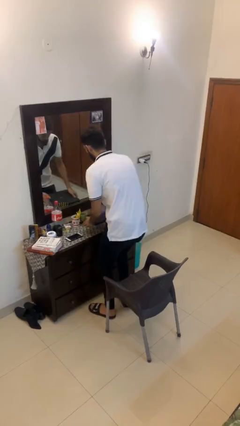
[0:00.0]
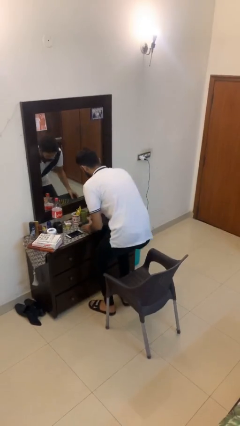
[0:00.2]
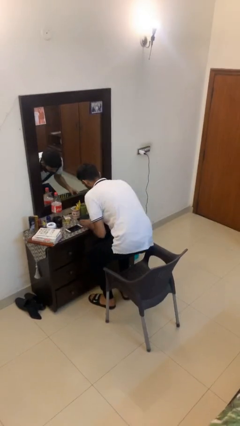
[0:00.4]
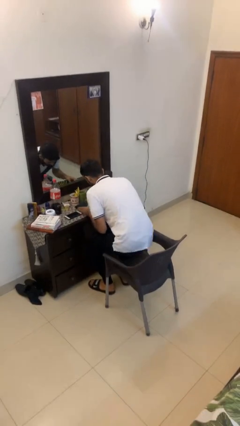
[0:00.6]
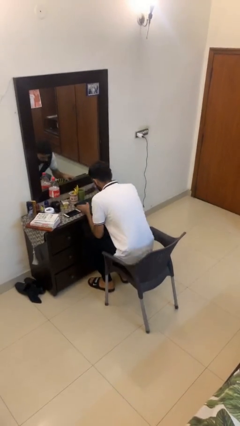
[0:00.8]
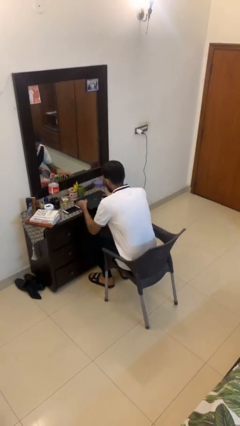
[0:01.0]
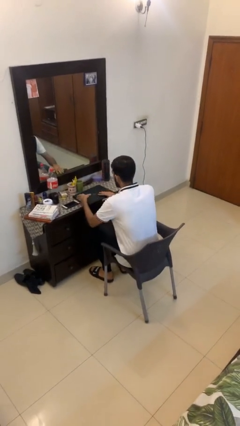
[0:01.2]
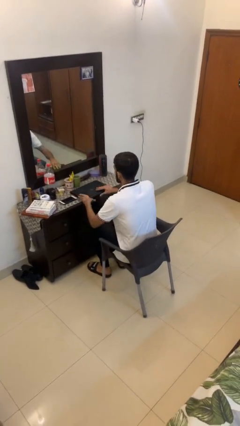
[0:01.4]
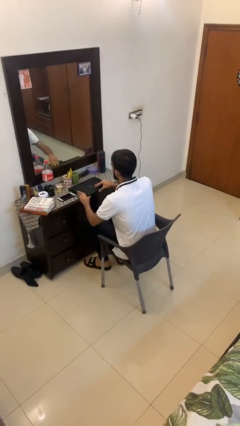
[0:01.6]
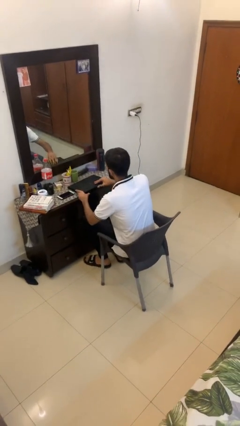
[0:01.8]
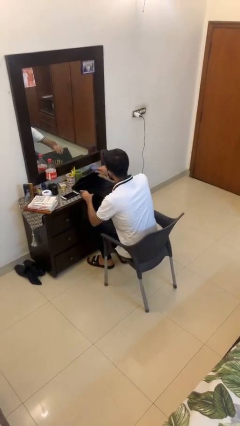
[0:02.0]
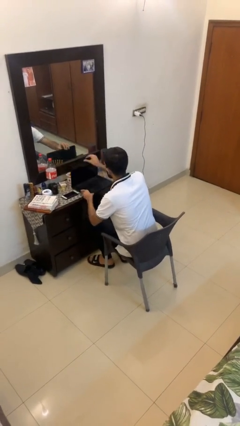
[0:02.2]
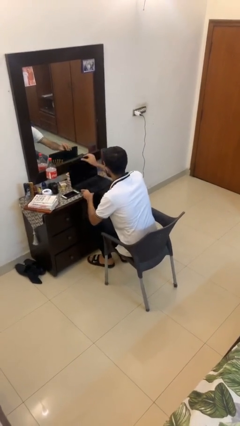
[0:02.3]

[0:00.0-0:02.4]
person sits down

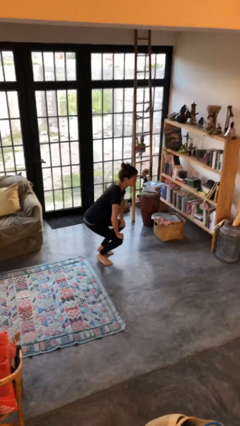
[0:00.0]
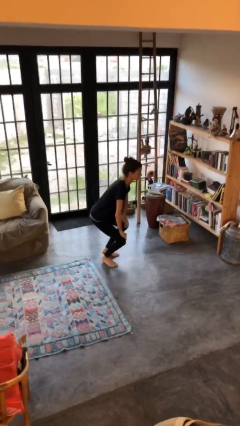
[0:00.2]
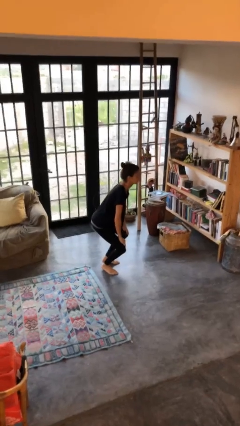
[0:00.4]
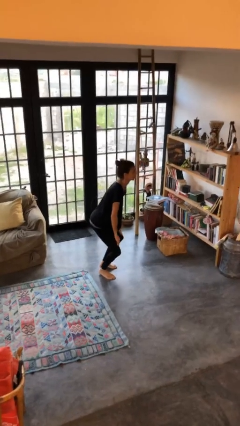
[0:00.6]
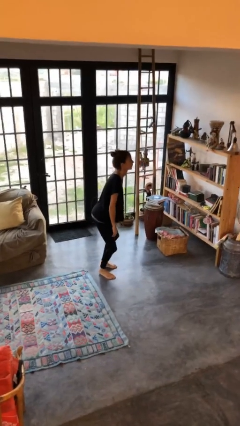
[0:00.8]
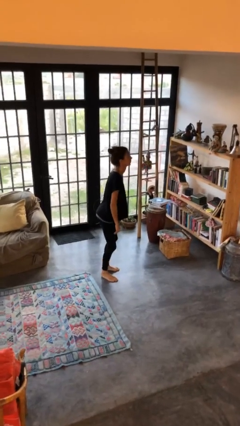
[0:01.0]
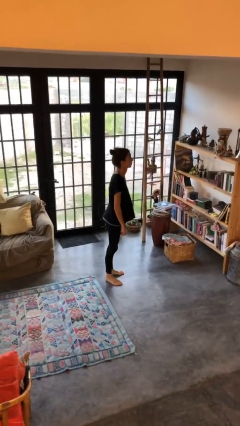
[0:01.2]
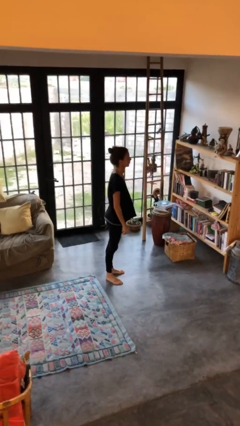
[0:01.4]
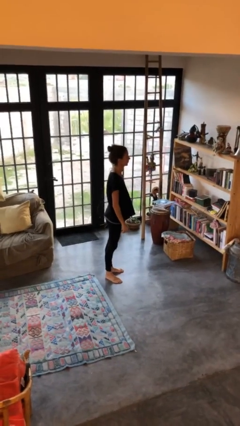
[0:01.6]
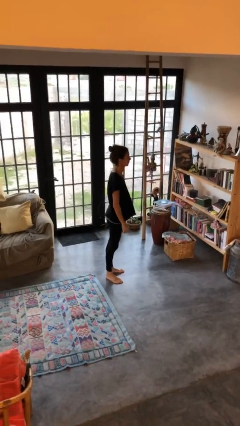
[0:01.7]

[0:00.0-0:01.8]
person stands up

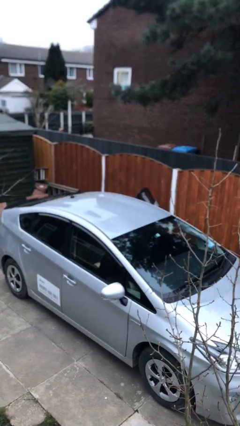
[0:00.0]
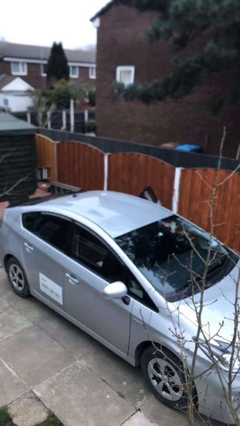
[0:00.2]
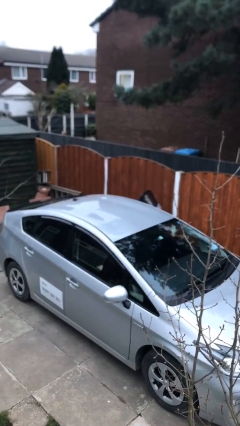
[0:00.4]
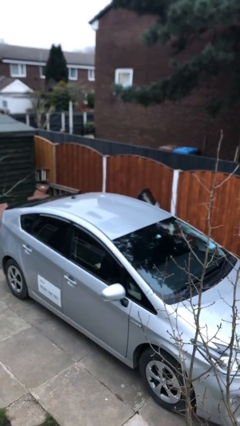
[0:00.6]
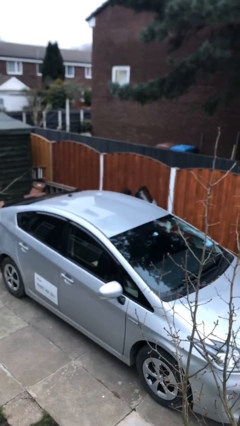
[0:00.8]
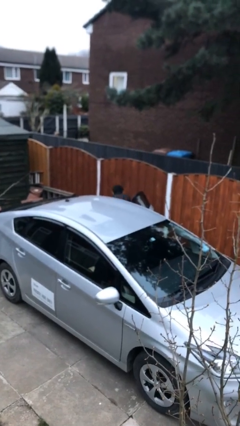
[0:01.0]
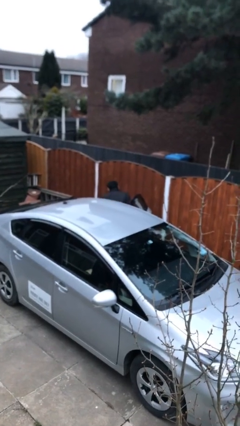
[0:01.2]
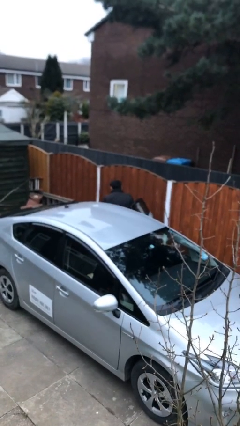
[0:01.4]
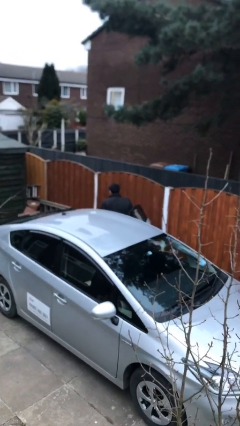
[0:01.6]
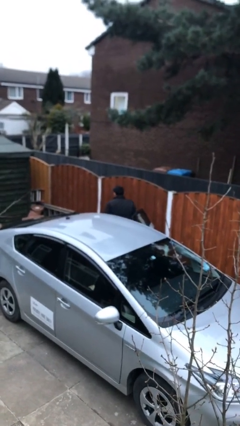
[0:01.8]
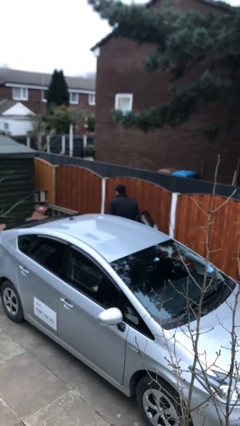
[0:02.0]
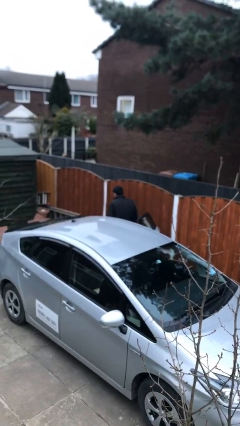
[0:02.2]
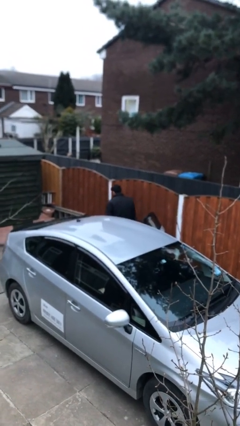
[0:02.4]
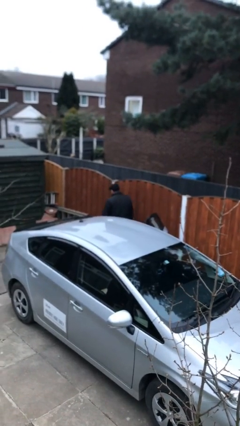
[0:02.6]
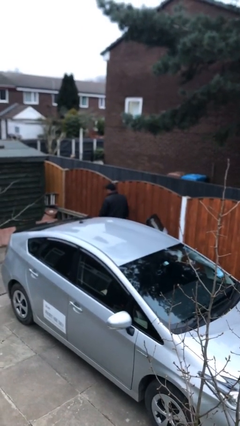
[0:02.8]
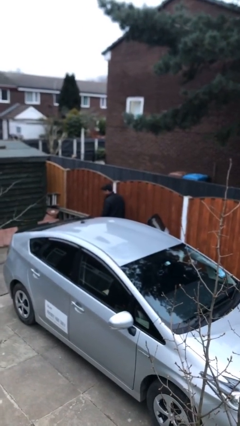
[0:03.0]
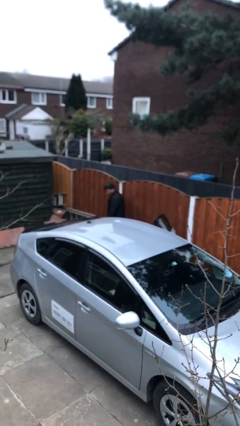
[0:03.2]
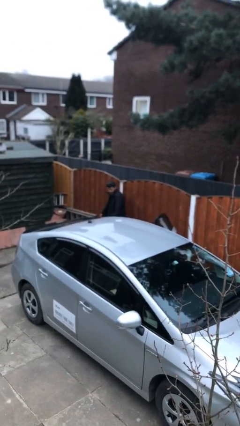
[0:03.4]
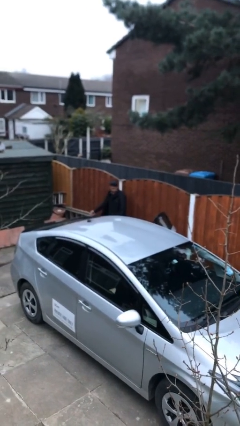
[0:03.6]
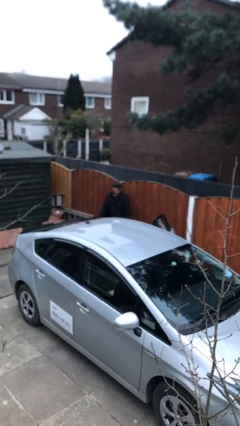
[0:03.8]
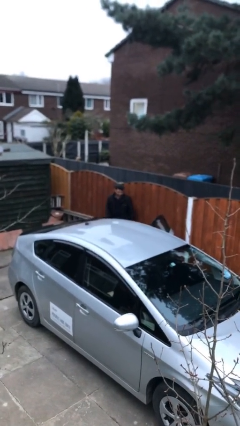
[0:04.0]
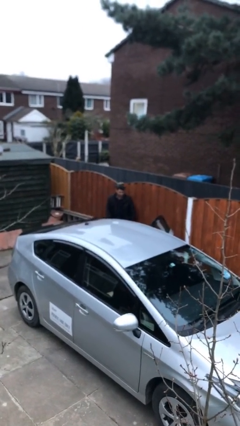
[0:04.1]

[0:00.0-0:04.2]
person exits car

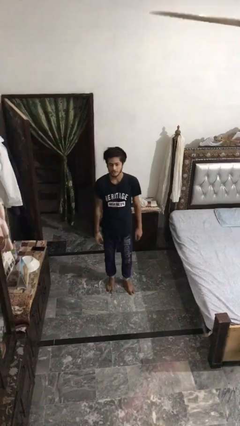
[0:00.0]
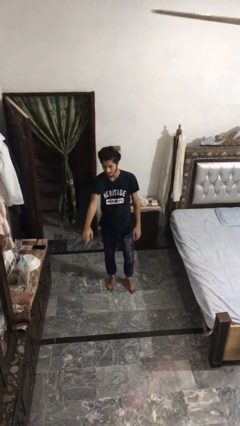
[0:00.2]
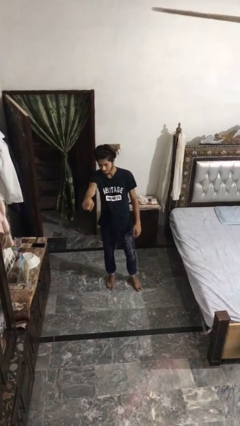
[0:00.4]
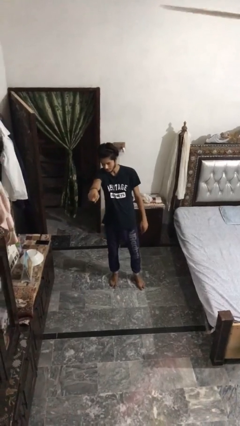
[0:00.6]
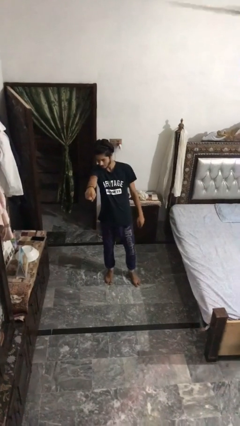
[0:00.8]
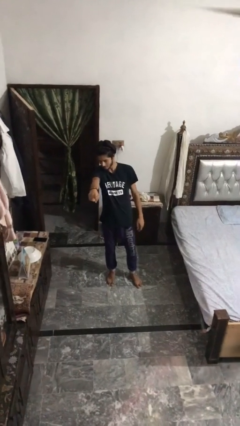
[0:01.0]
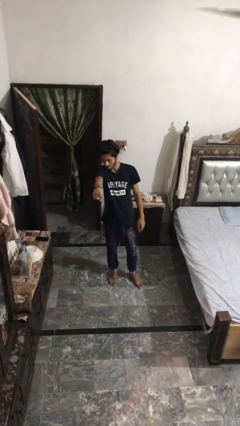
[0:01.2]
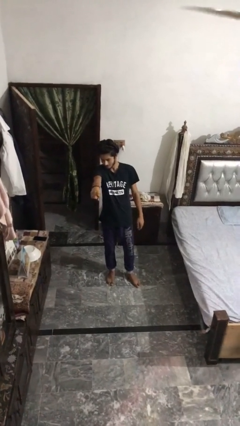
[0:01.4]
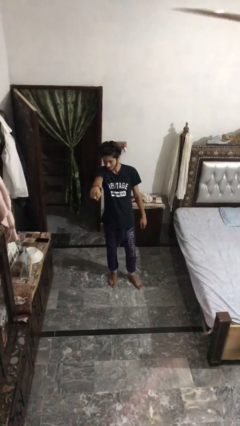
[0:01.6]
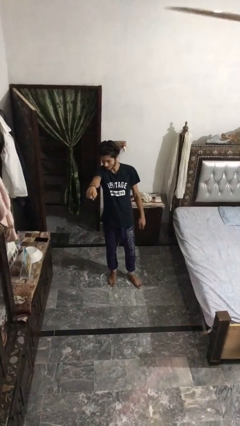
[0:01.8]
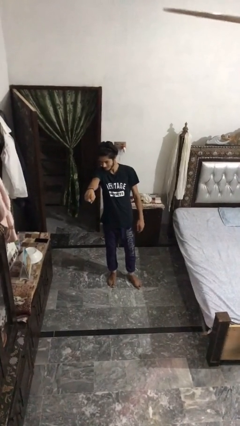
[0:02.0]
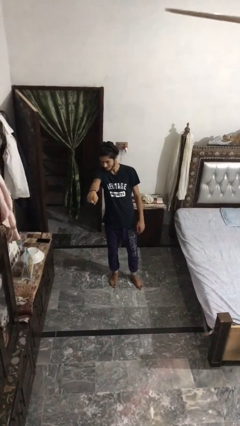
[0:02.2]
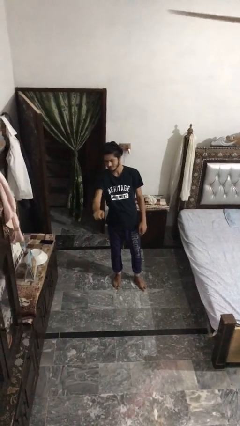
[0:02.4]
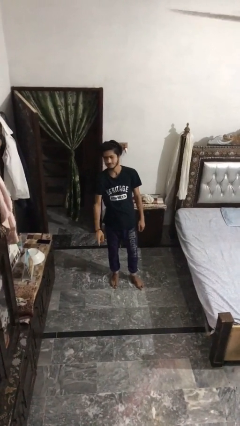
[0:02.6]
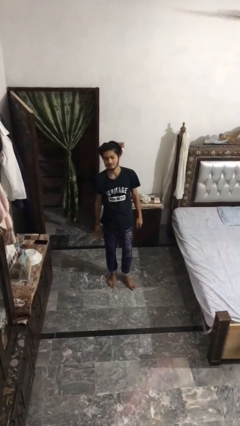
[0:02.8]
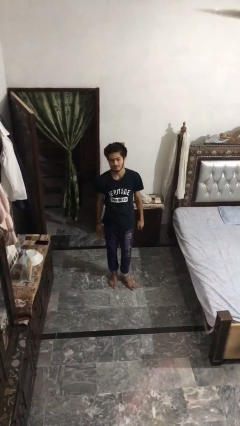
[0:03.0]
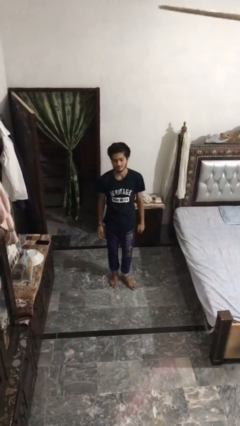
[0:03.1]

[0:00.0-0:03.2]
person points at person

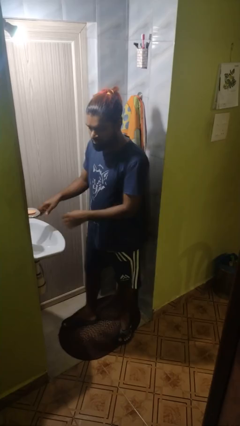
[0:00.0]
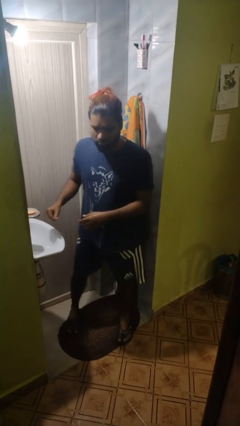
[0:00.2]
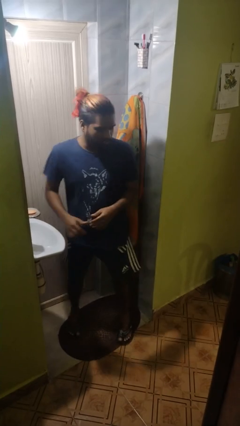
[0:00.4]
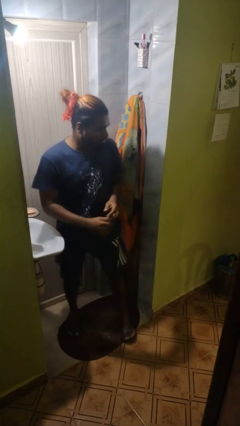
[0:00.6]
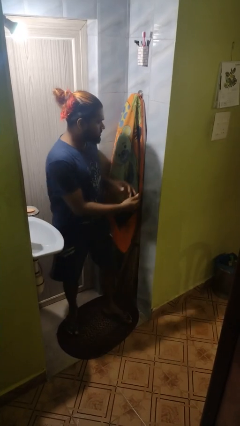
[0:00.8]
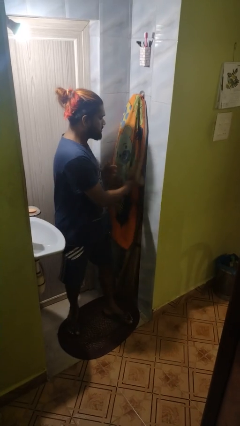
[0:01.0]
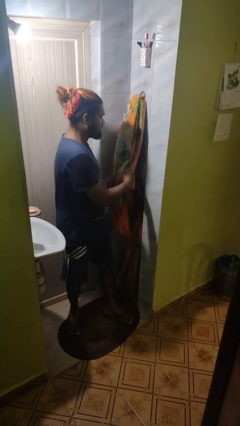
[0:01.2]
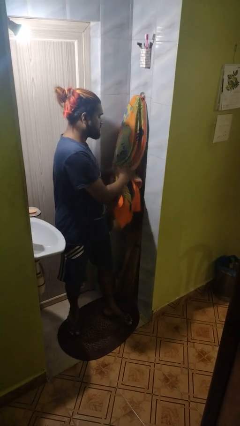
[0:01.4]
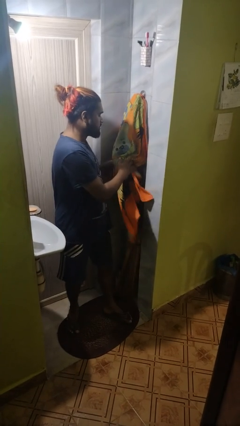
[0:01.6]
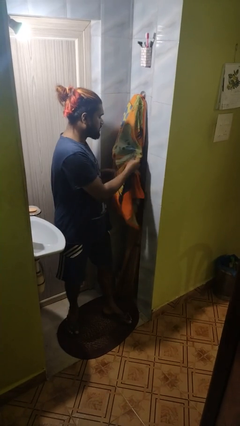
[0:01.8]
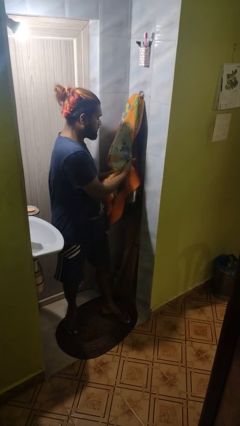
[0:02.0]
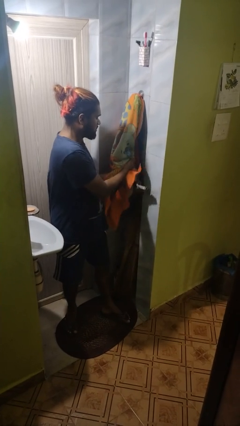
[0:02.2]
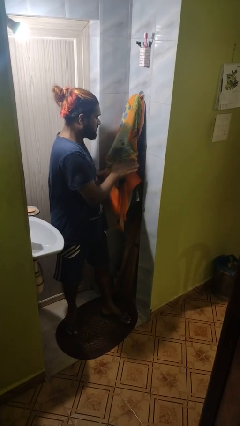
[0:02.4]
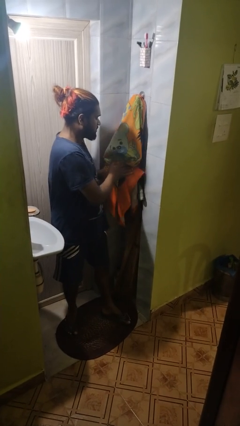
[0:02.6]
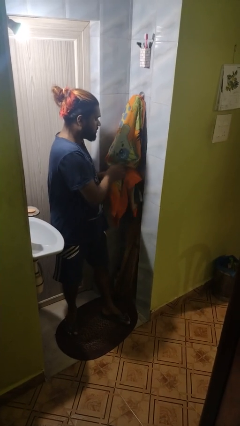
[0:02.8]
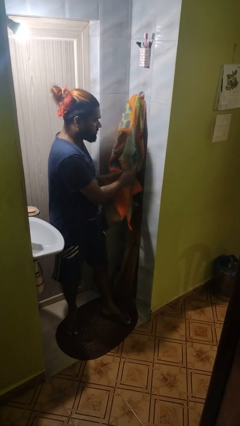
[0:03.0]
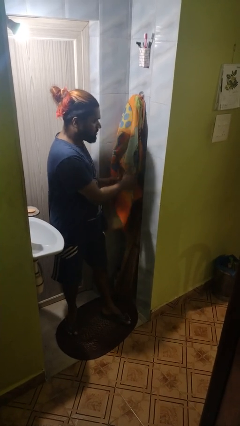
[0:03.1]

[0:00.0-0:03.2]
person dries hands with towel

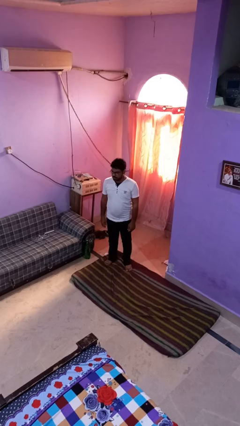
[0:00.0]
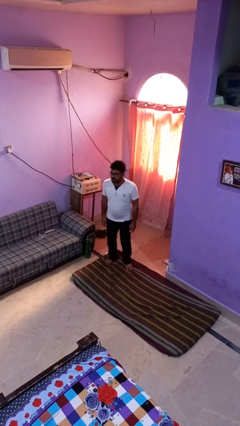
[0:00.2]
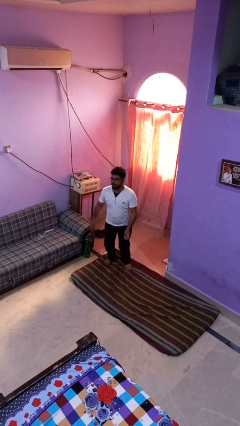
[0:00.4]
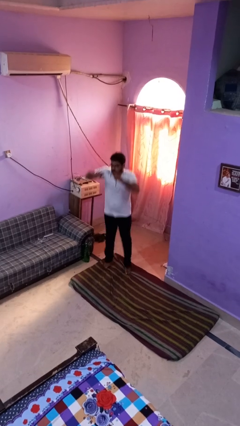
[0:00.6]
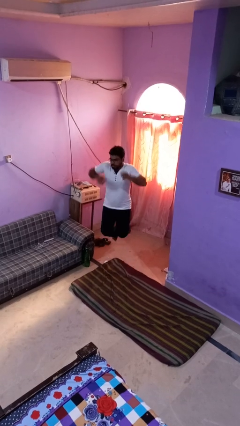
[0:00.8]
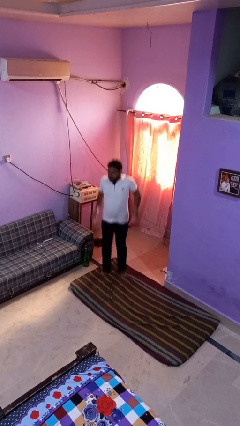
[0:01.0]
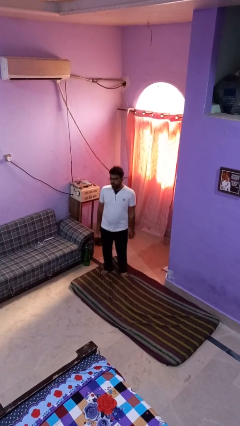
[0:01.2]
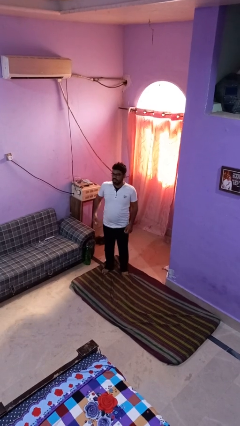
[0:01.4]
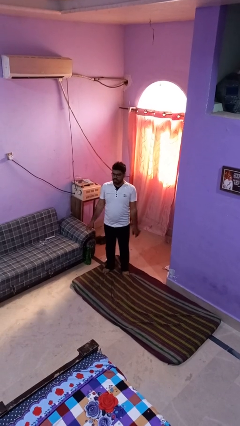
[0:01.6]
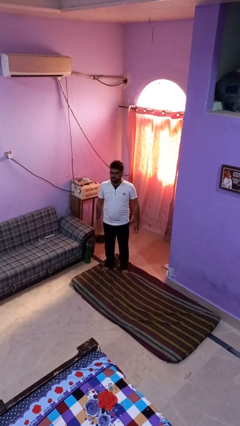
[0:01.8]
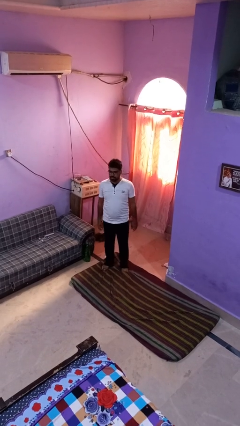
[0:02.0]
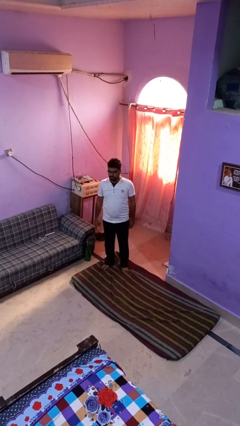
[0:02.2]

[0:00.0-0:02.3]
person jumps

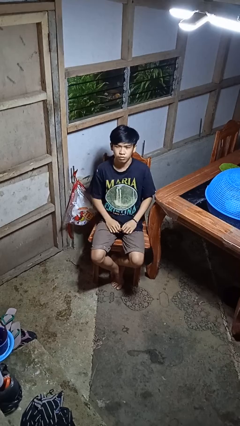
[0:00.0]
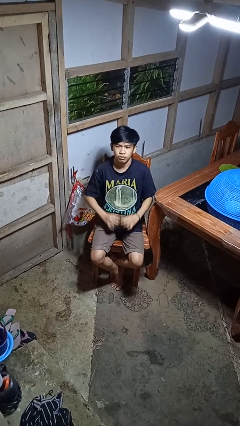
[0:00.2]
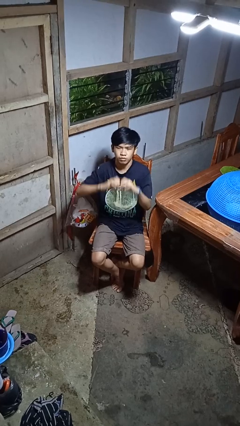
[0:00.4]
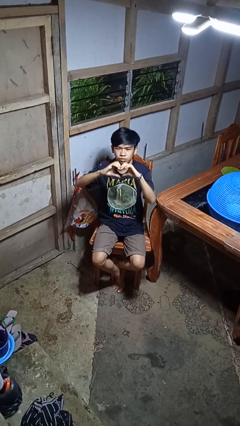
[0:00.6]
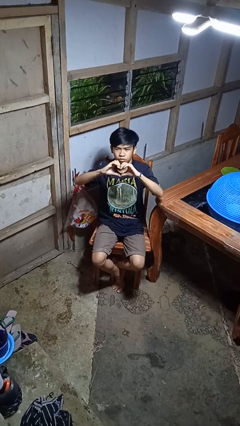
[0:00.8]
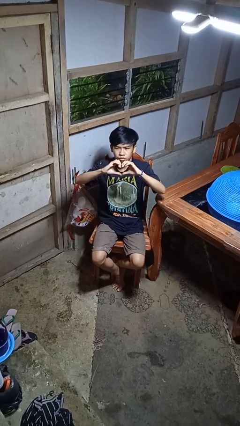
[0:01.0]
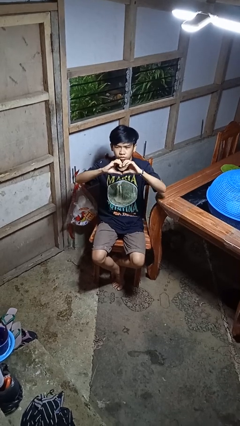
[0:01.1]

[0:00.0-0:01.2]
person gestures heart
